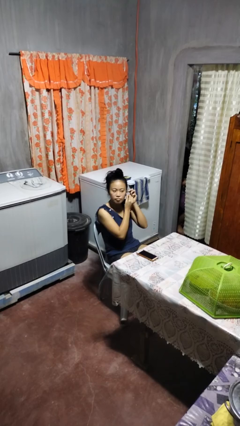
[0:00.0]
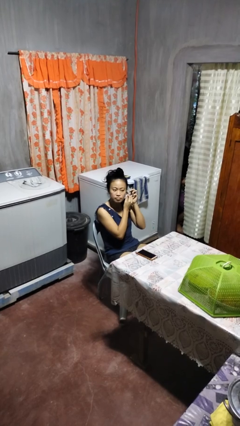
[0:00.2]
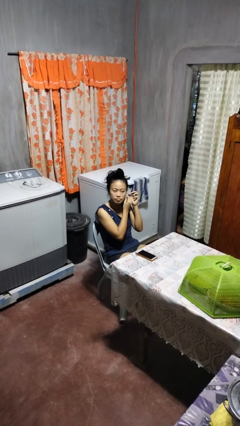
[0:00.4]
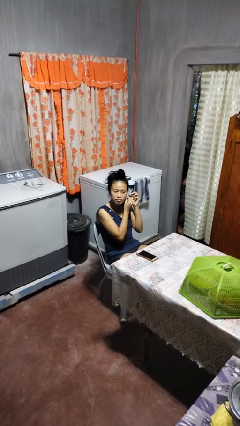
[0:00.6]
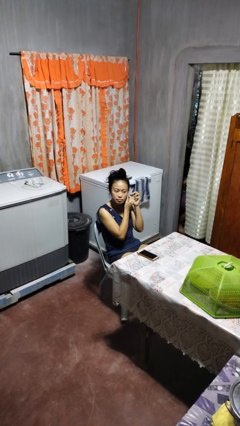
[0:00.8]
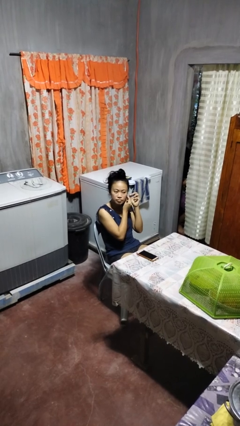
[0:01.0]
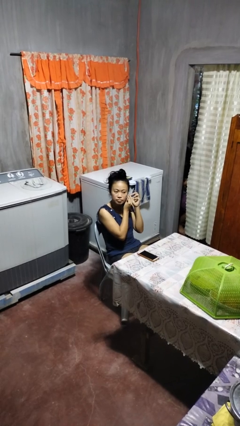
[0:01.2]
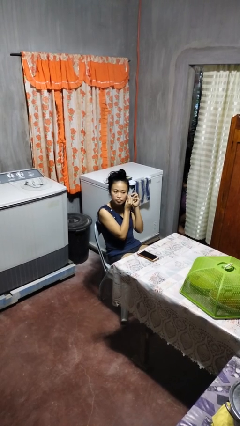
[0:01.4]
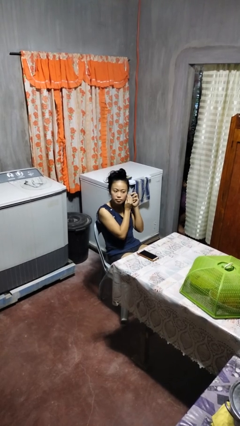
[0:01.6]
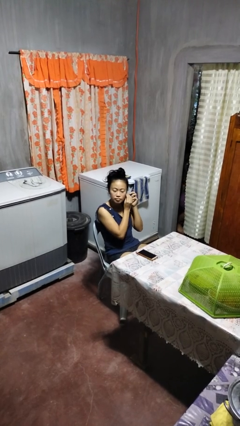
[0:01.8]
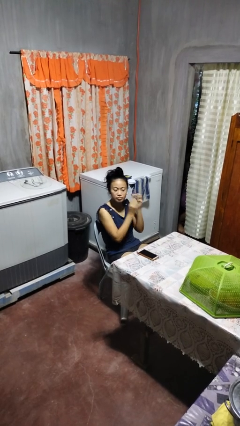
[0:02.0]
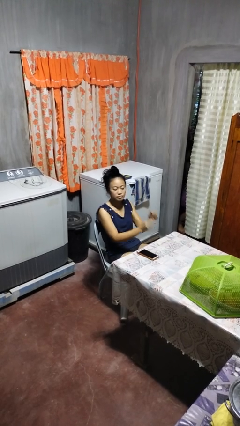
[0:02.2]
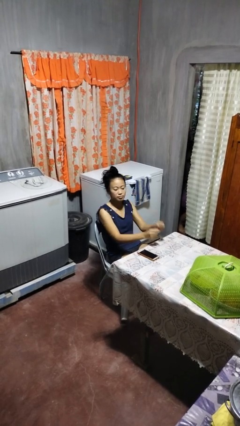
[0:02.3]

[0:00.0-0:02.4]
person puts on earrings

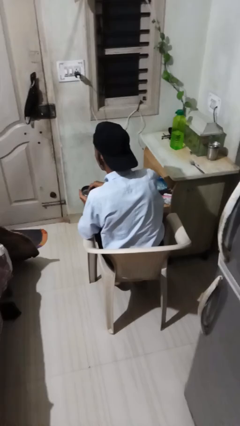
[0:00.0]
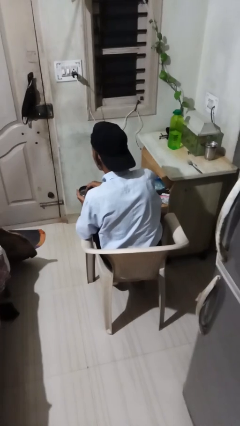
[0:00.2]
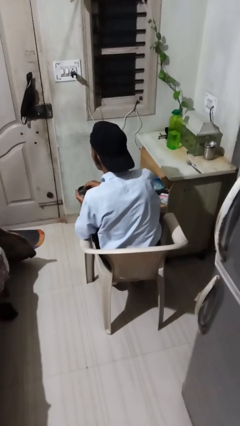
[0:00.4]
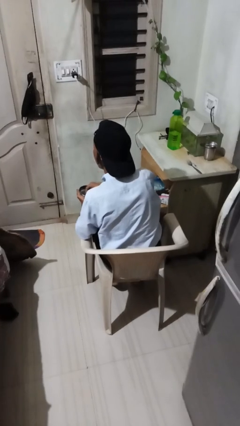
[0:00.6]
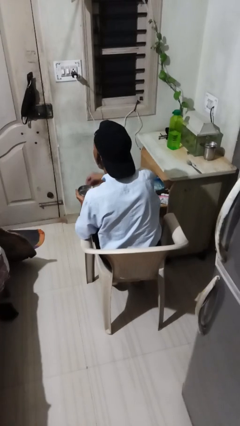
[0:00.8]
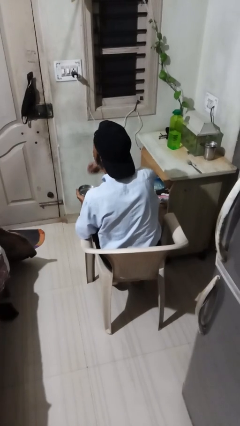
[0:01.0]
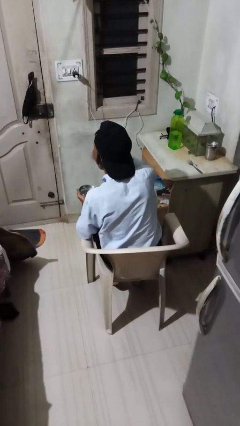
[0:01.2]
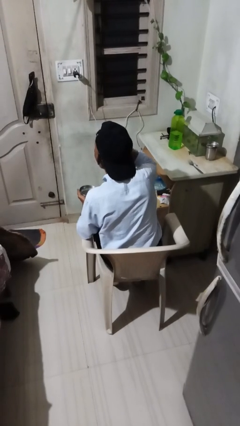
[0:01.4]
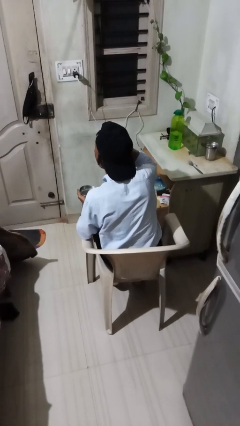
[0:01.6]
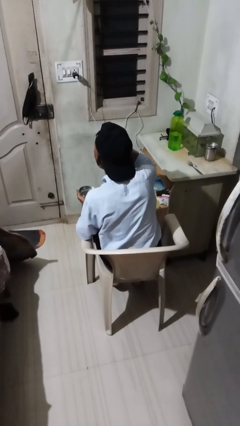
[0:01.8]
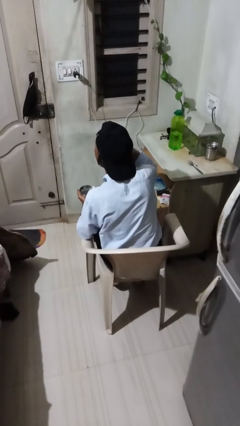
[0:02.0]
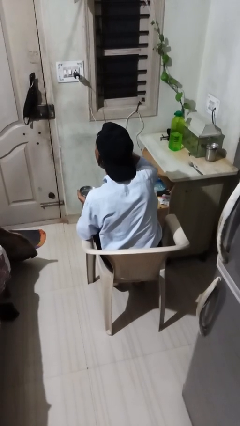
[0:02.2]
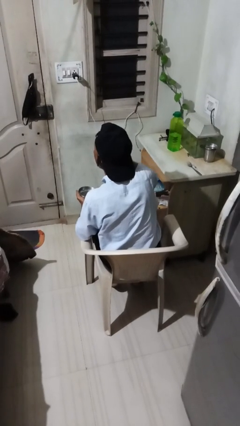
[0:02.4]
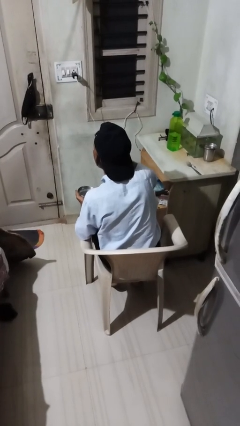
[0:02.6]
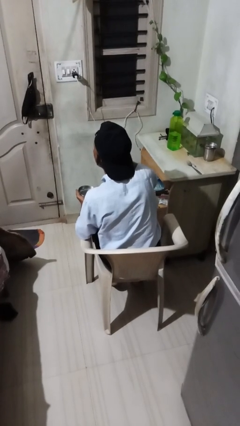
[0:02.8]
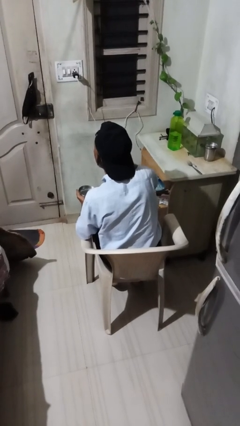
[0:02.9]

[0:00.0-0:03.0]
person eats with hands

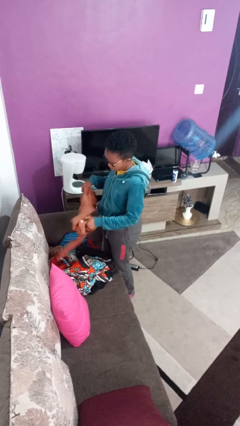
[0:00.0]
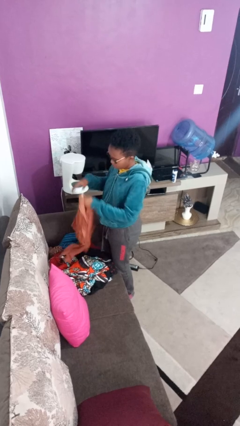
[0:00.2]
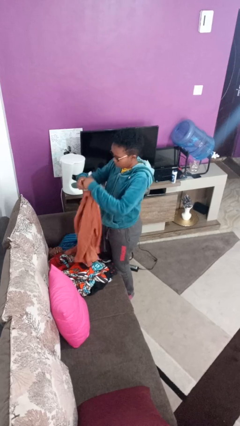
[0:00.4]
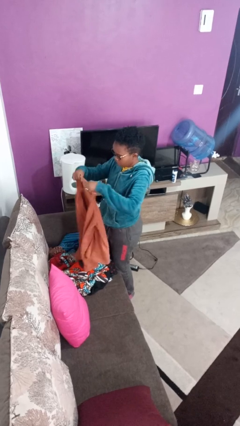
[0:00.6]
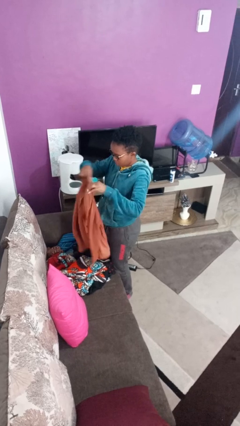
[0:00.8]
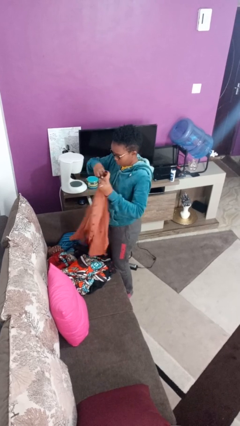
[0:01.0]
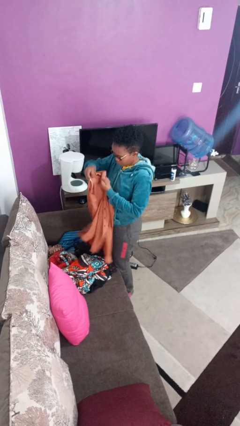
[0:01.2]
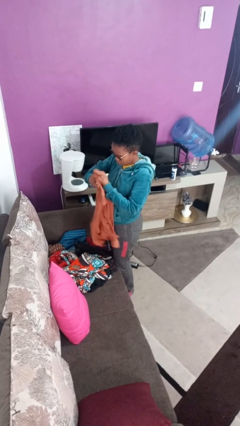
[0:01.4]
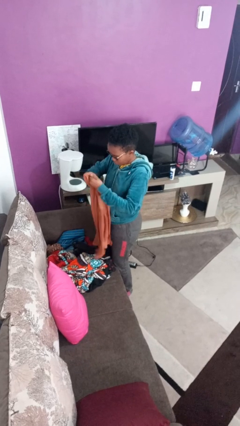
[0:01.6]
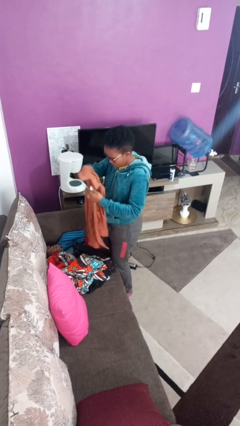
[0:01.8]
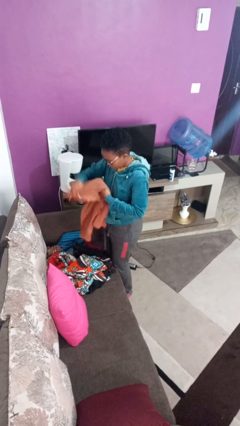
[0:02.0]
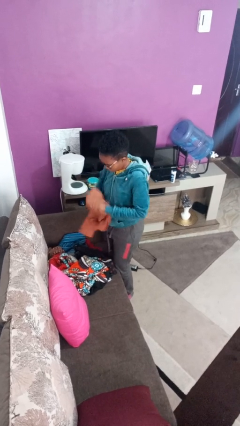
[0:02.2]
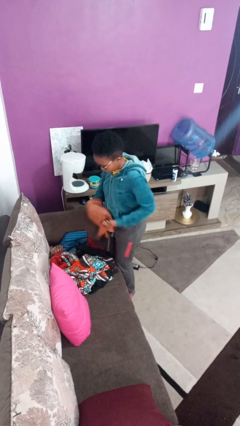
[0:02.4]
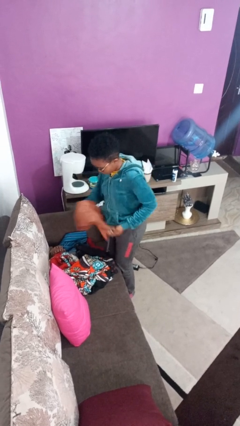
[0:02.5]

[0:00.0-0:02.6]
person folds shirt

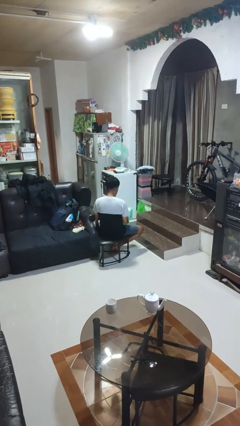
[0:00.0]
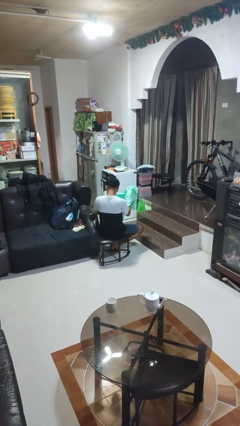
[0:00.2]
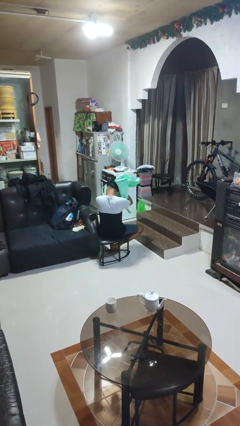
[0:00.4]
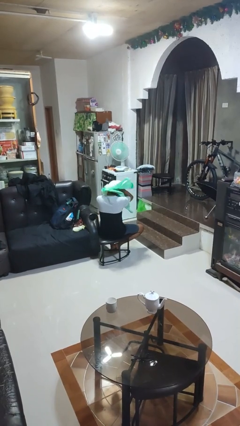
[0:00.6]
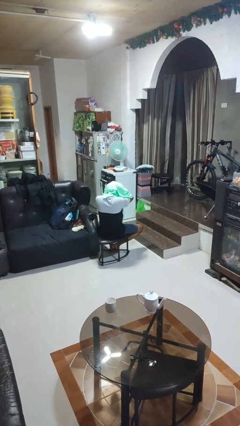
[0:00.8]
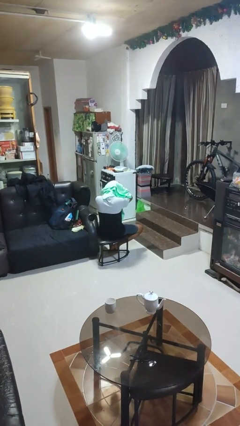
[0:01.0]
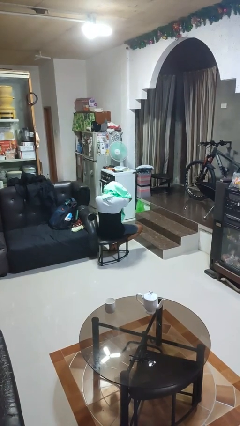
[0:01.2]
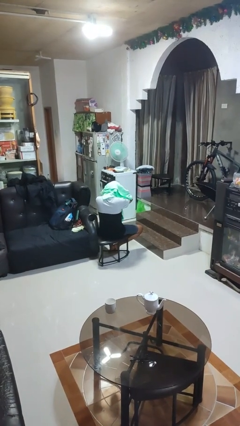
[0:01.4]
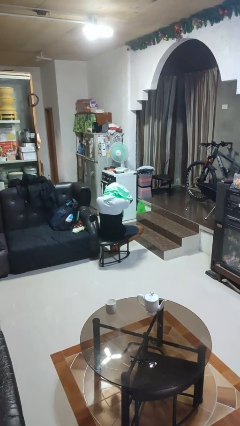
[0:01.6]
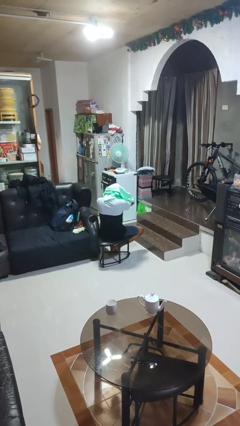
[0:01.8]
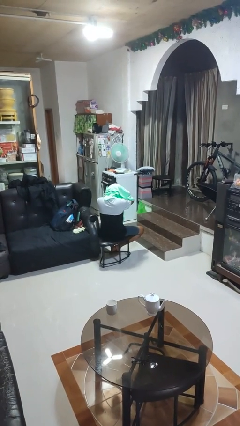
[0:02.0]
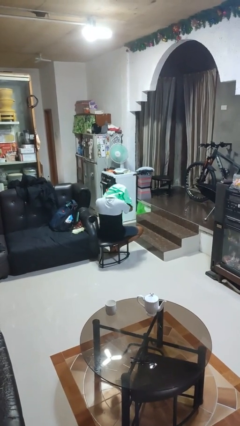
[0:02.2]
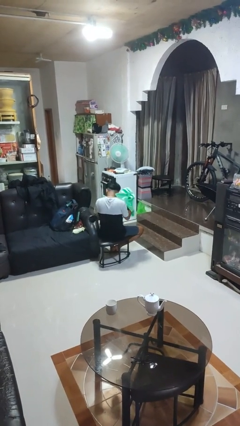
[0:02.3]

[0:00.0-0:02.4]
person dries hair with towel

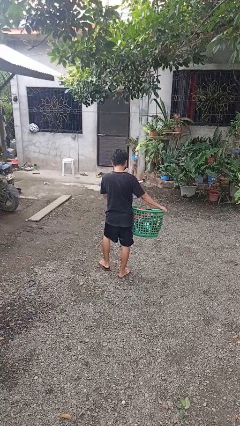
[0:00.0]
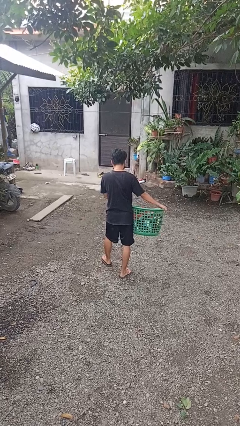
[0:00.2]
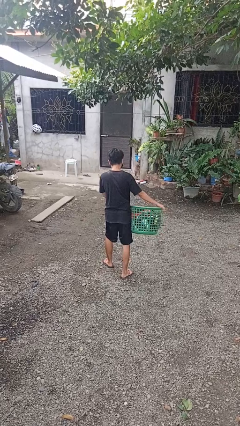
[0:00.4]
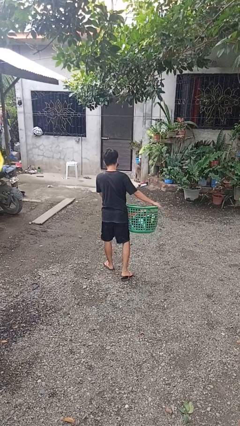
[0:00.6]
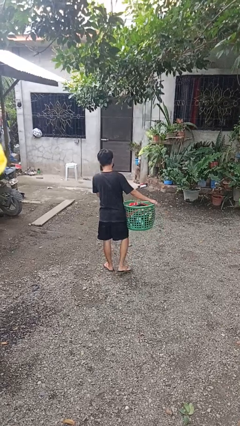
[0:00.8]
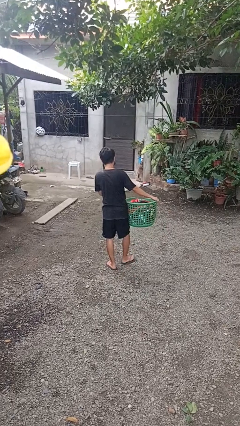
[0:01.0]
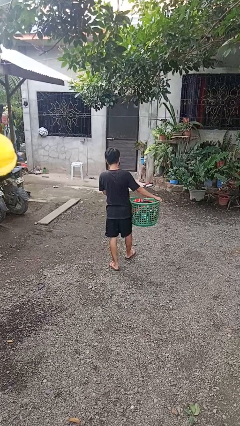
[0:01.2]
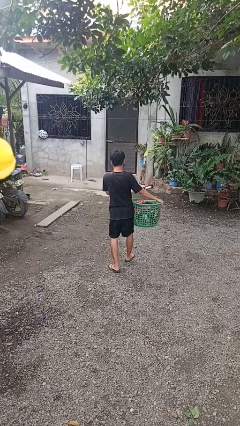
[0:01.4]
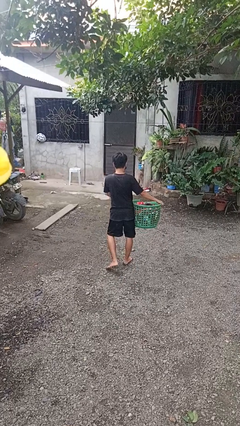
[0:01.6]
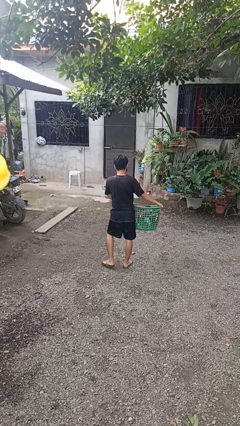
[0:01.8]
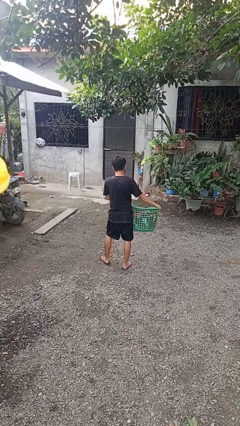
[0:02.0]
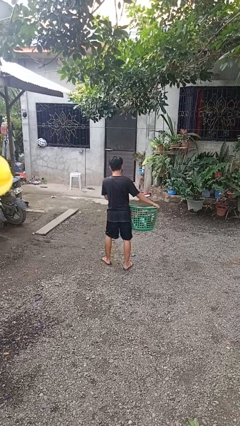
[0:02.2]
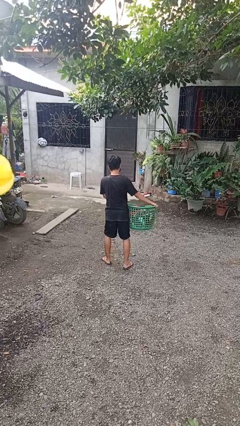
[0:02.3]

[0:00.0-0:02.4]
person carries laundry basket

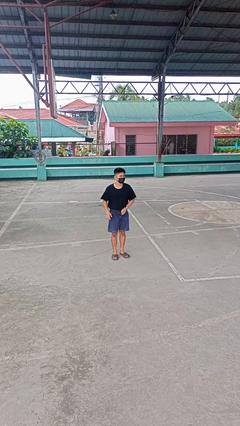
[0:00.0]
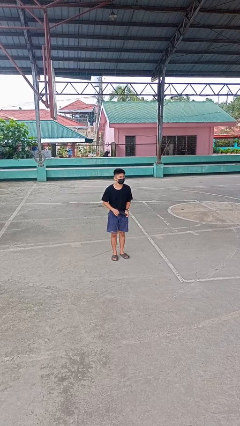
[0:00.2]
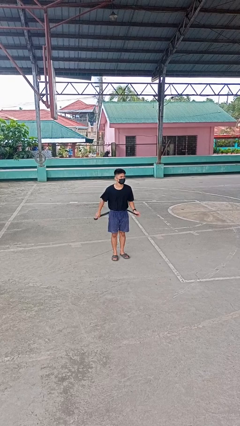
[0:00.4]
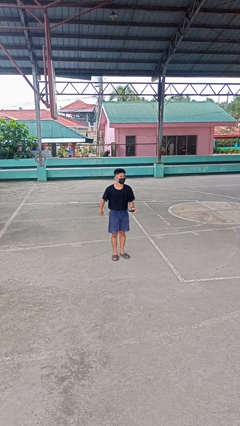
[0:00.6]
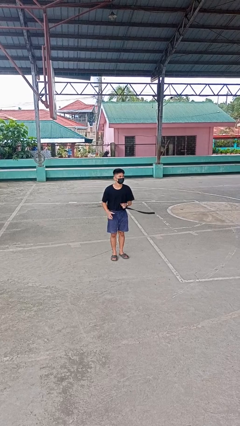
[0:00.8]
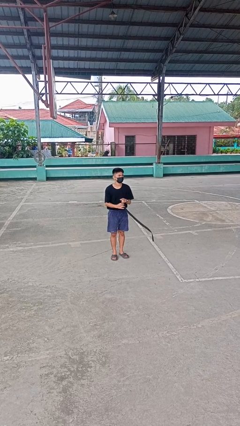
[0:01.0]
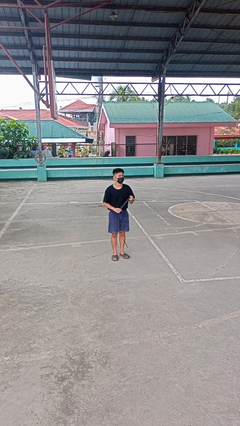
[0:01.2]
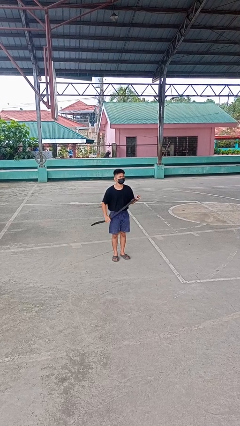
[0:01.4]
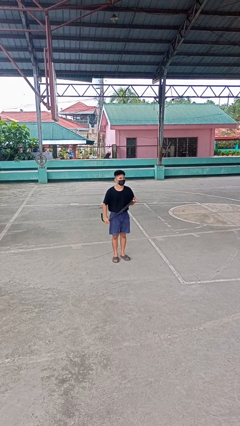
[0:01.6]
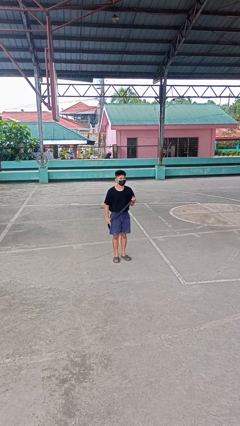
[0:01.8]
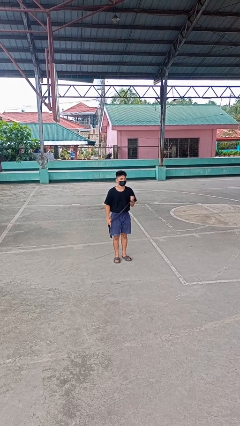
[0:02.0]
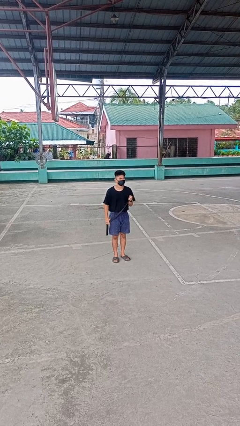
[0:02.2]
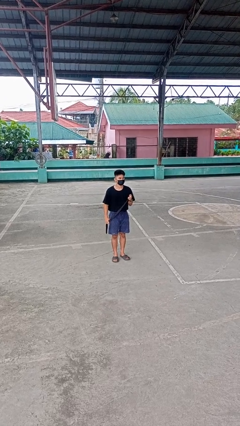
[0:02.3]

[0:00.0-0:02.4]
person takes off belt

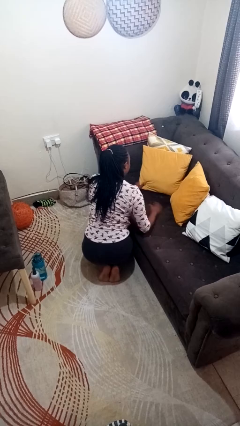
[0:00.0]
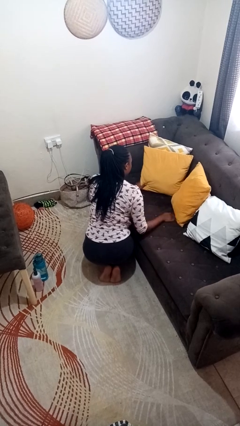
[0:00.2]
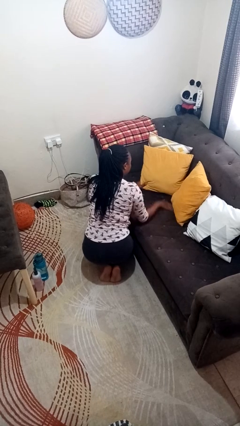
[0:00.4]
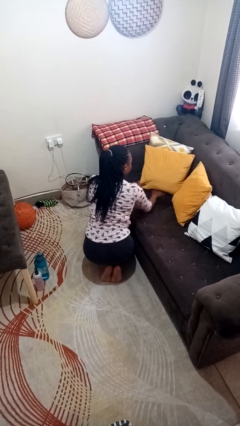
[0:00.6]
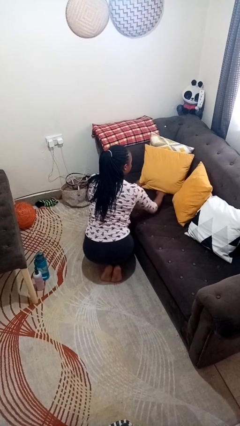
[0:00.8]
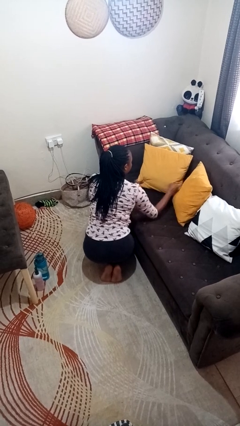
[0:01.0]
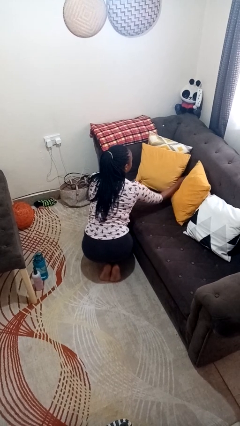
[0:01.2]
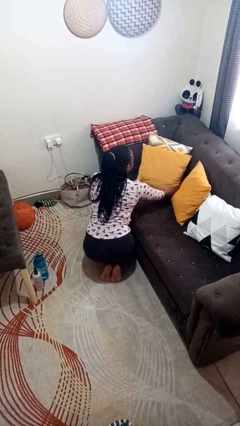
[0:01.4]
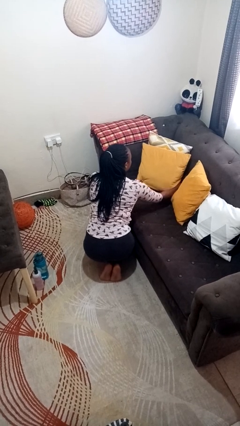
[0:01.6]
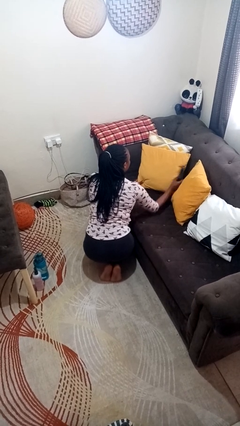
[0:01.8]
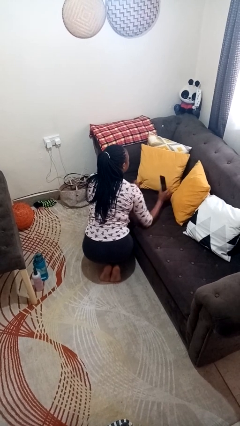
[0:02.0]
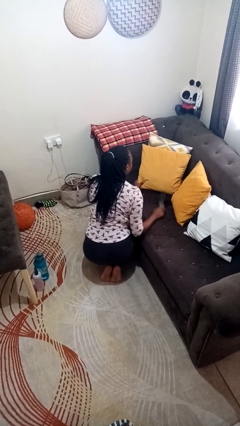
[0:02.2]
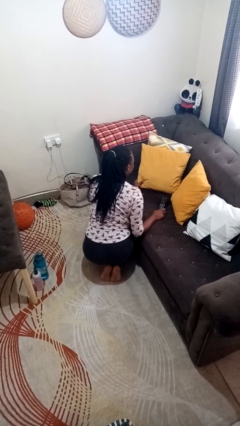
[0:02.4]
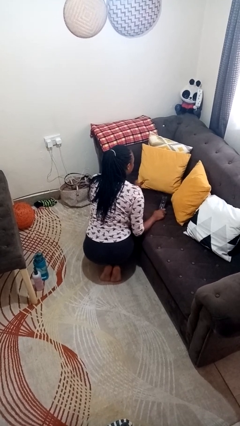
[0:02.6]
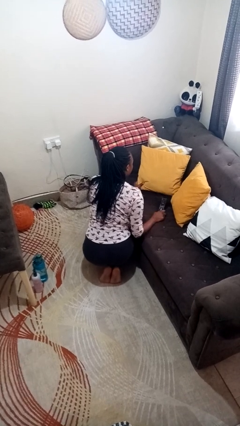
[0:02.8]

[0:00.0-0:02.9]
person searches in couch
